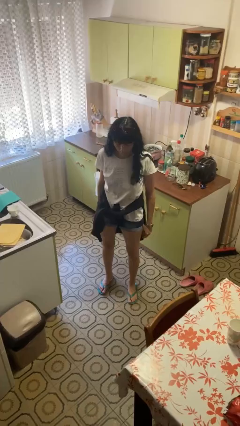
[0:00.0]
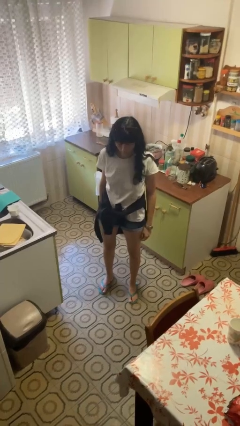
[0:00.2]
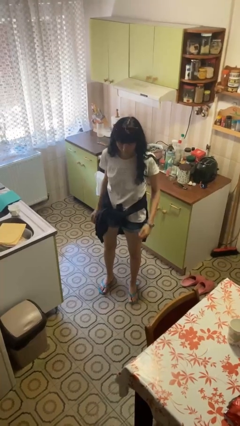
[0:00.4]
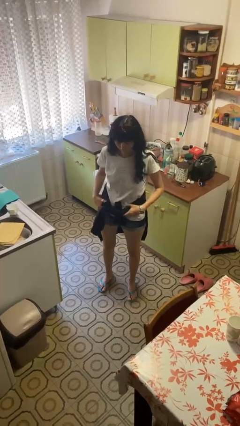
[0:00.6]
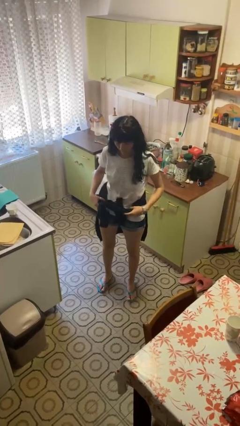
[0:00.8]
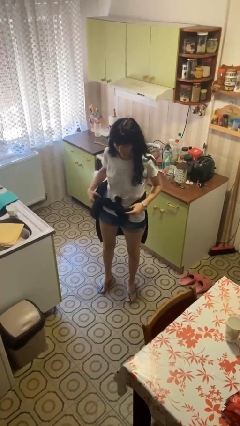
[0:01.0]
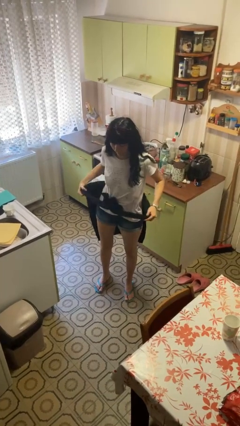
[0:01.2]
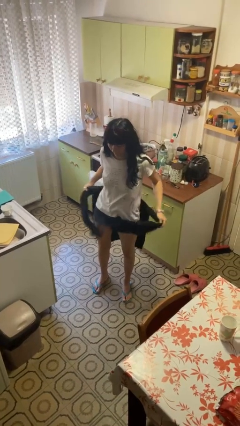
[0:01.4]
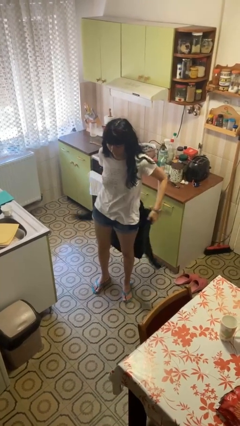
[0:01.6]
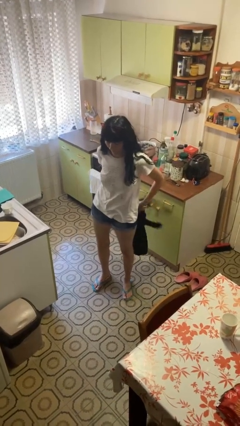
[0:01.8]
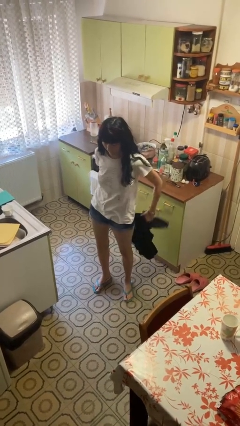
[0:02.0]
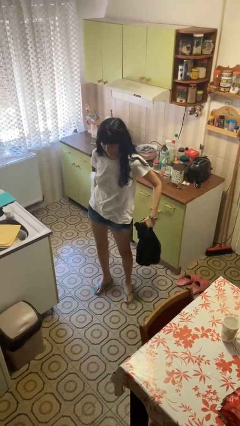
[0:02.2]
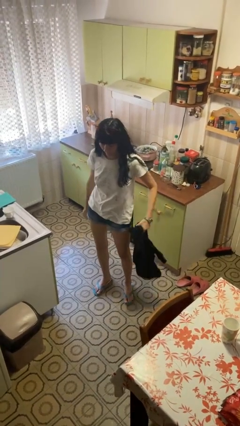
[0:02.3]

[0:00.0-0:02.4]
person unties jacket around waist

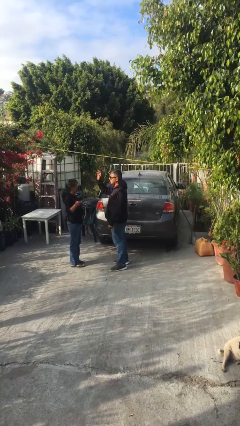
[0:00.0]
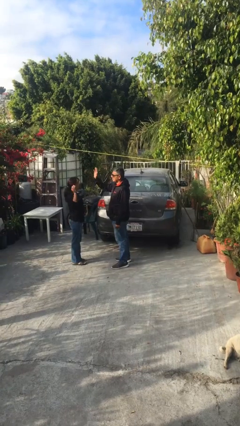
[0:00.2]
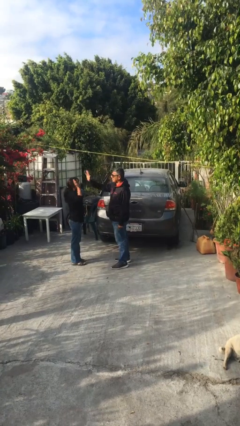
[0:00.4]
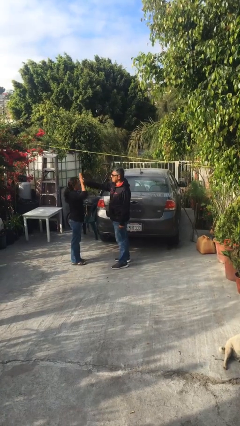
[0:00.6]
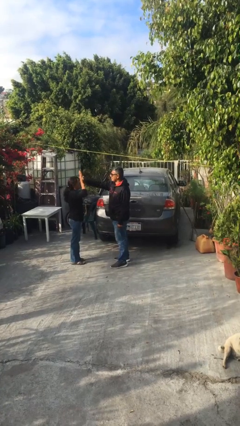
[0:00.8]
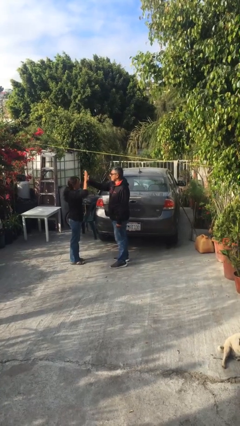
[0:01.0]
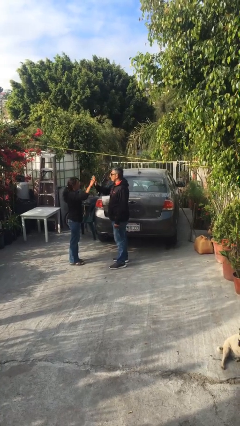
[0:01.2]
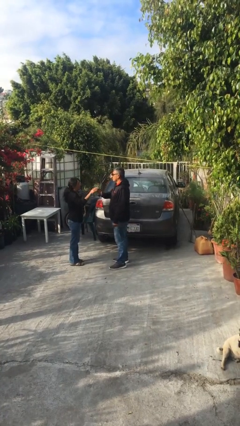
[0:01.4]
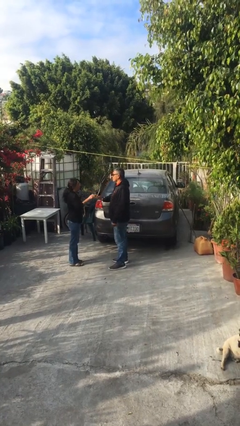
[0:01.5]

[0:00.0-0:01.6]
person highfives hand

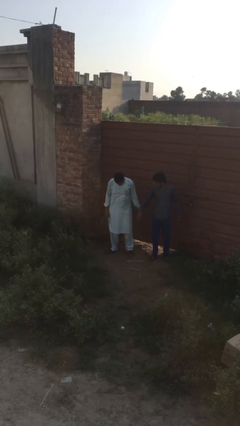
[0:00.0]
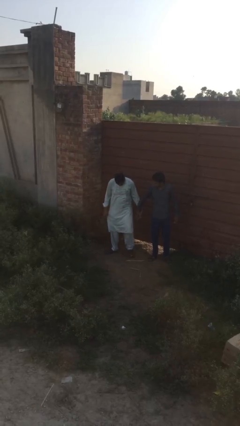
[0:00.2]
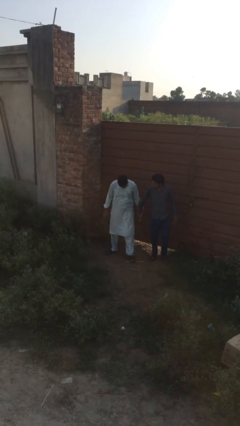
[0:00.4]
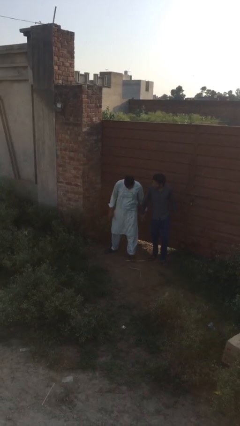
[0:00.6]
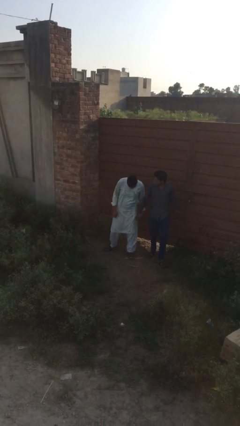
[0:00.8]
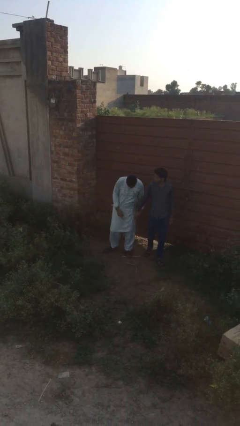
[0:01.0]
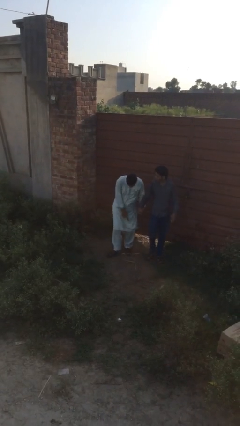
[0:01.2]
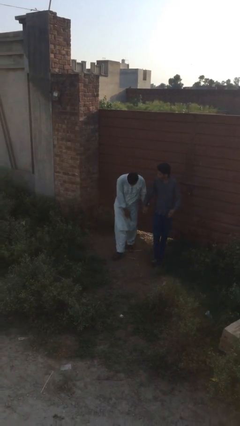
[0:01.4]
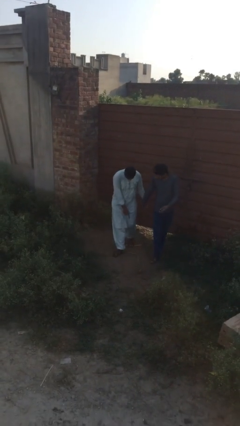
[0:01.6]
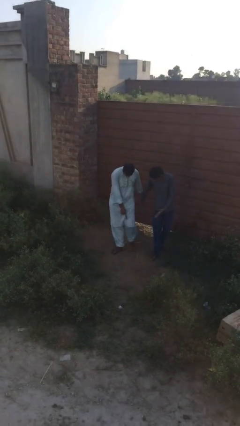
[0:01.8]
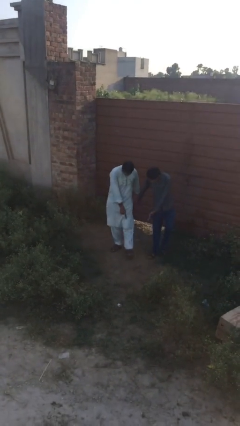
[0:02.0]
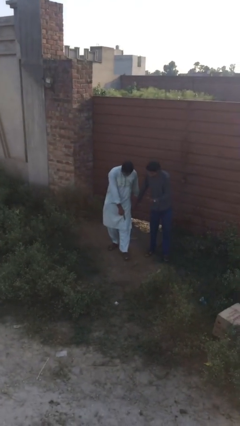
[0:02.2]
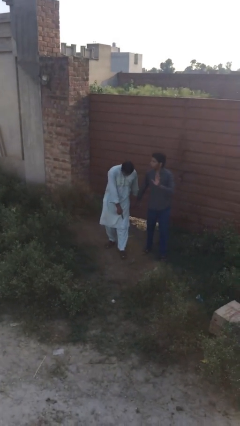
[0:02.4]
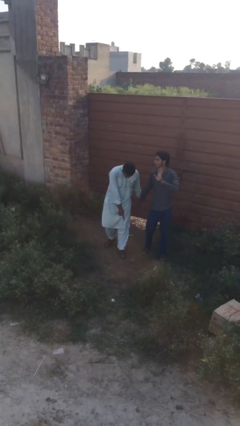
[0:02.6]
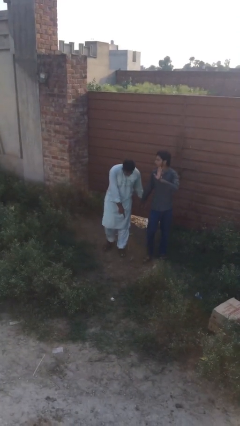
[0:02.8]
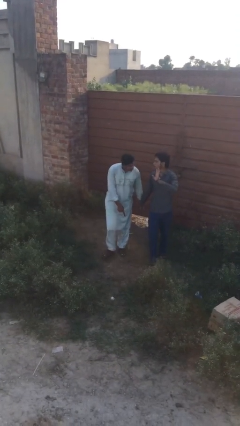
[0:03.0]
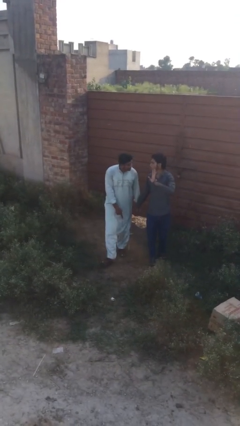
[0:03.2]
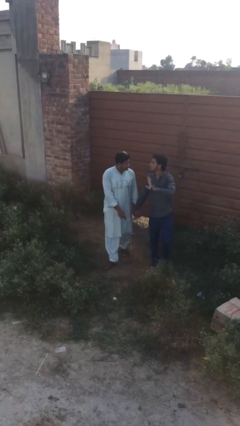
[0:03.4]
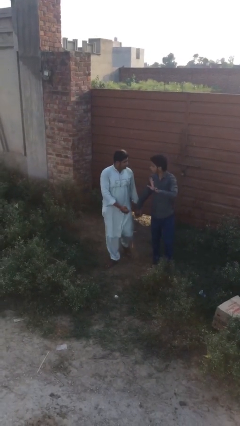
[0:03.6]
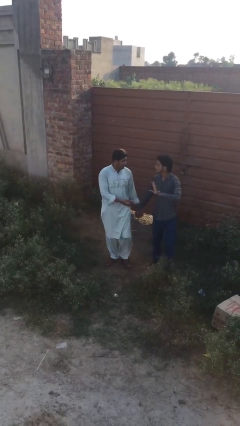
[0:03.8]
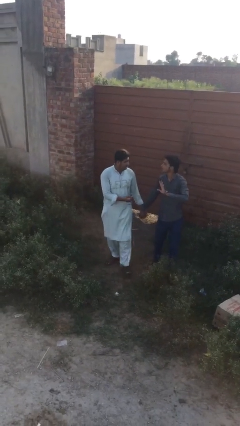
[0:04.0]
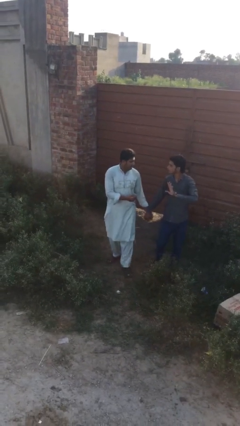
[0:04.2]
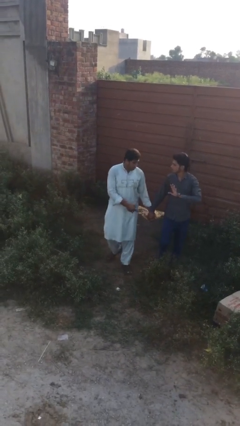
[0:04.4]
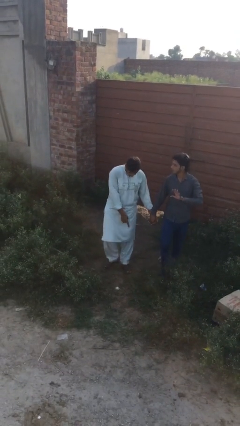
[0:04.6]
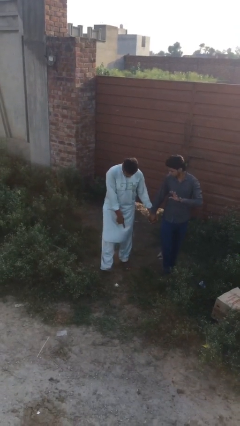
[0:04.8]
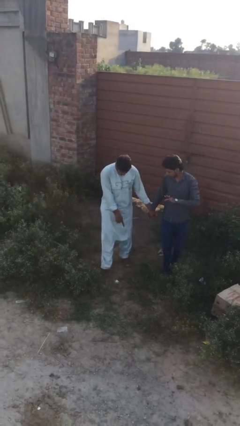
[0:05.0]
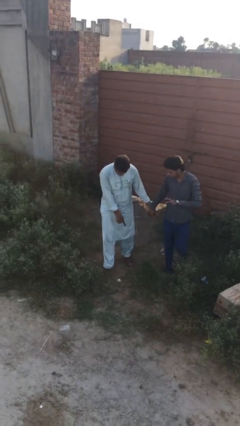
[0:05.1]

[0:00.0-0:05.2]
person holds hand

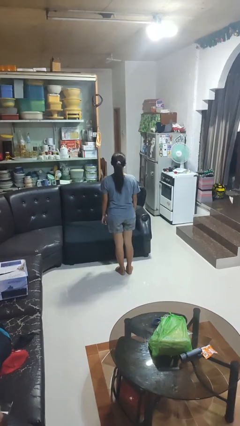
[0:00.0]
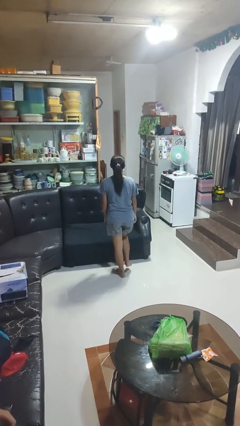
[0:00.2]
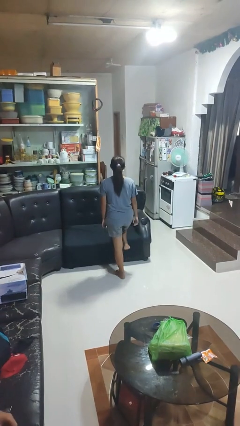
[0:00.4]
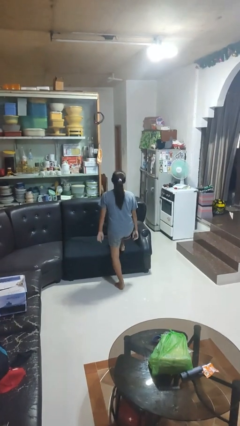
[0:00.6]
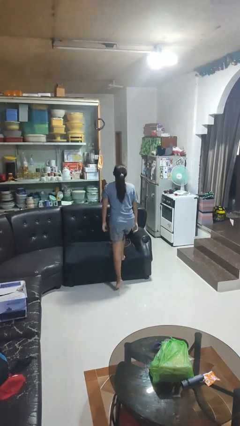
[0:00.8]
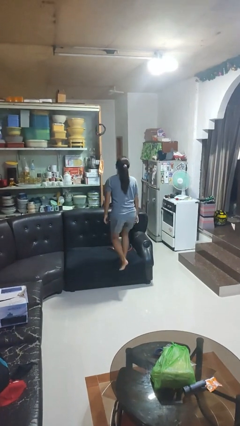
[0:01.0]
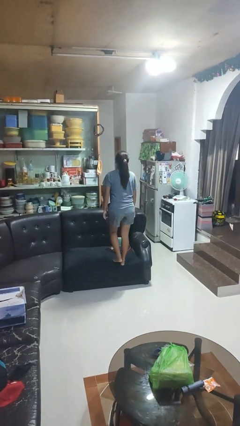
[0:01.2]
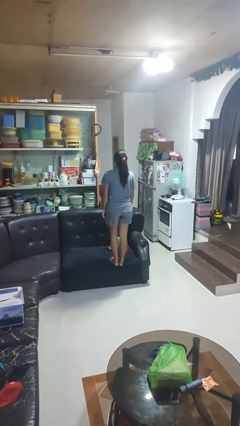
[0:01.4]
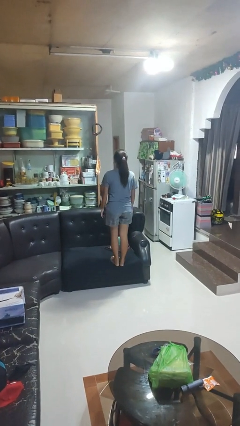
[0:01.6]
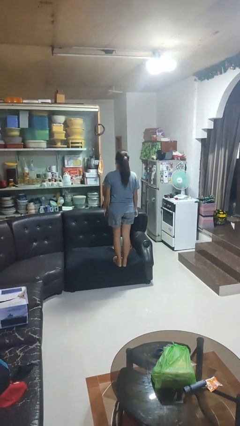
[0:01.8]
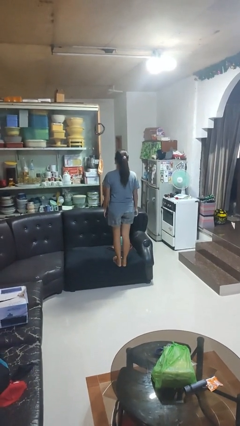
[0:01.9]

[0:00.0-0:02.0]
person climbs on couch

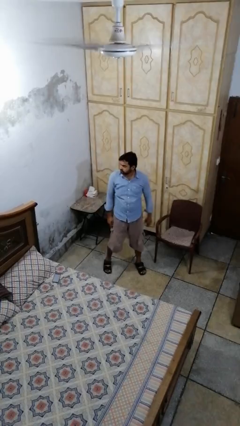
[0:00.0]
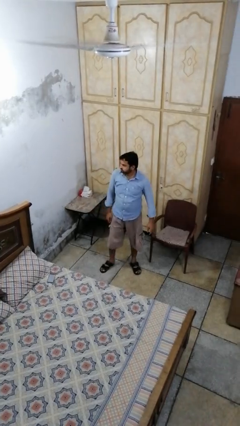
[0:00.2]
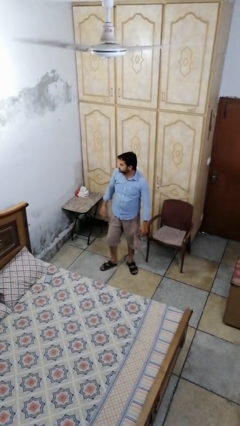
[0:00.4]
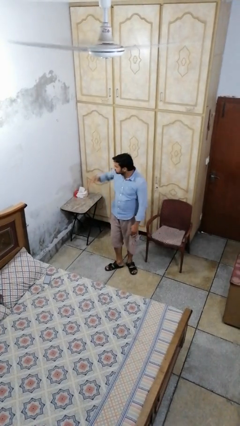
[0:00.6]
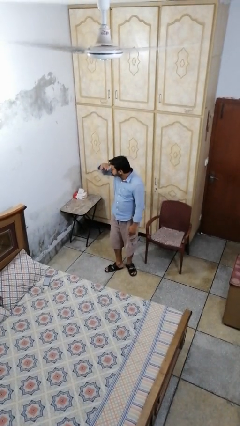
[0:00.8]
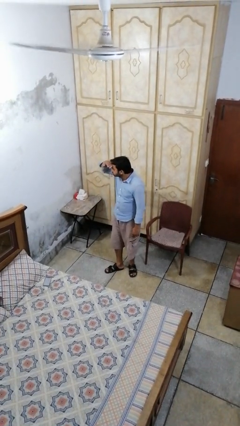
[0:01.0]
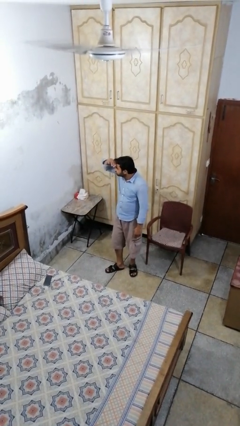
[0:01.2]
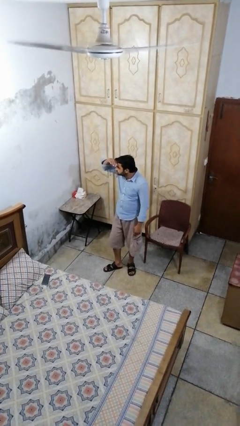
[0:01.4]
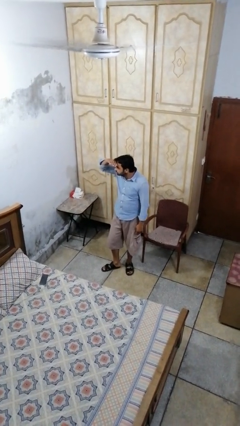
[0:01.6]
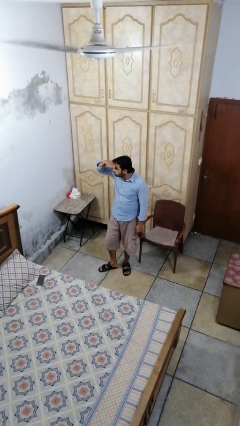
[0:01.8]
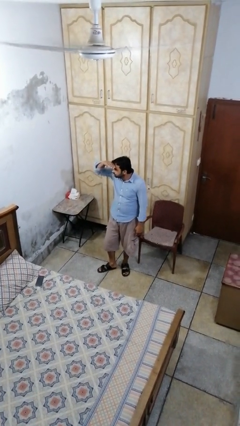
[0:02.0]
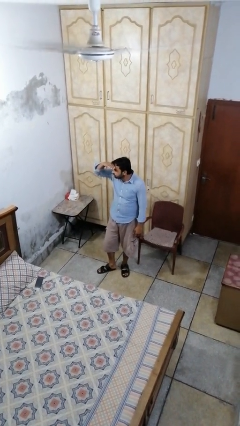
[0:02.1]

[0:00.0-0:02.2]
person shades eyes

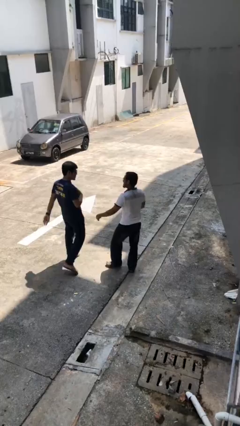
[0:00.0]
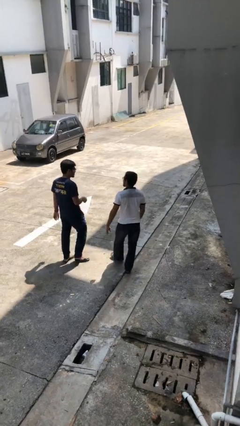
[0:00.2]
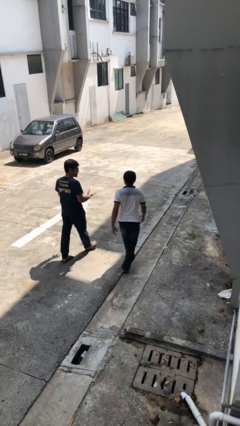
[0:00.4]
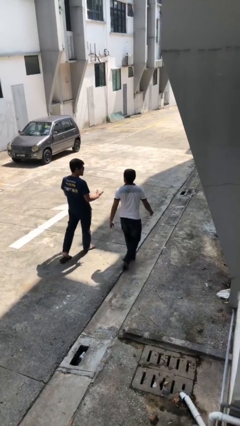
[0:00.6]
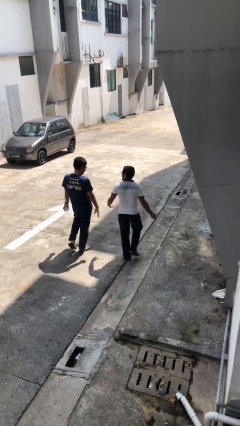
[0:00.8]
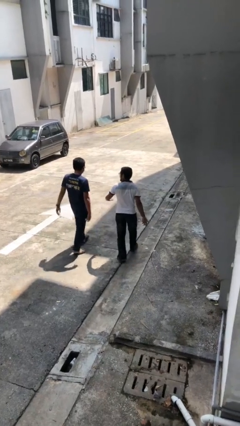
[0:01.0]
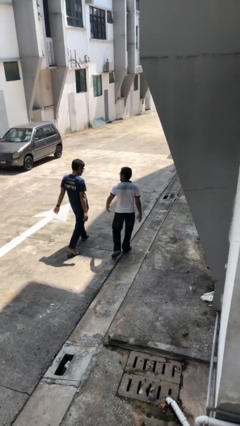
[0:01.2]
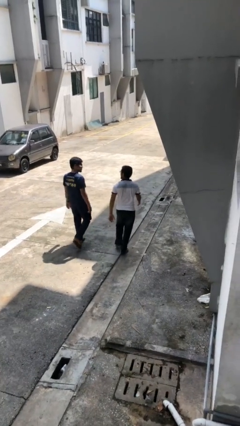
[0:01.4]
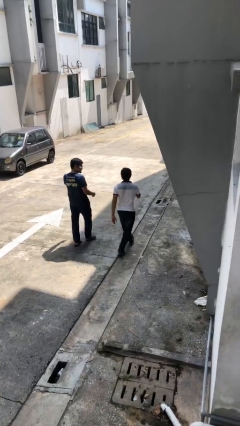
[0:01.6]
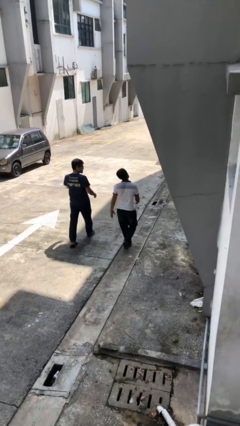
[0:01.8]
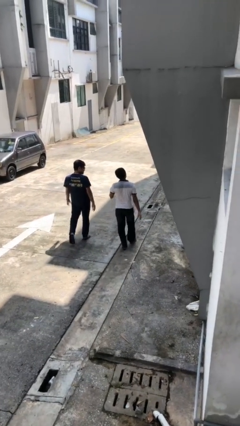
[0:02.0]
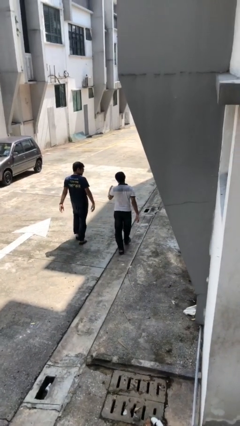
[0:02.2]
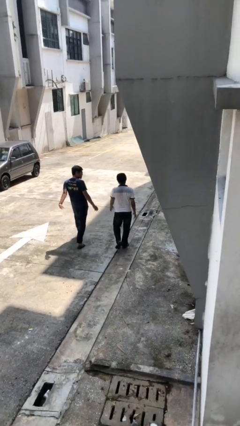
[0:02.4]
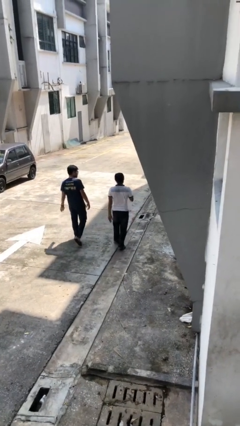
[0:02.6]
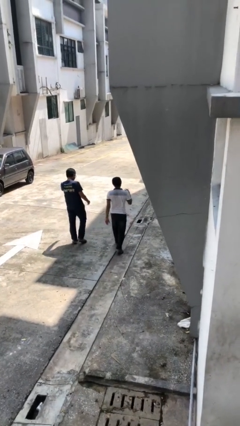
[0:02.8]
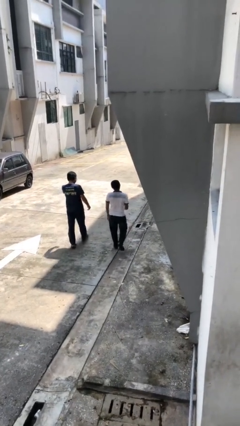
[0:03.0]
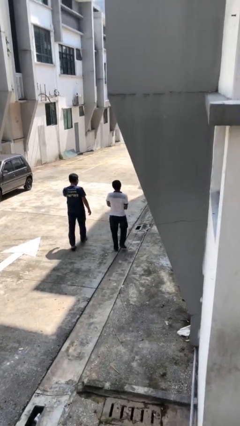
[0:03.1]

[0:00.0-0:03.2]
person talks to person

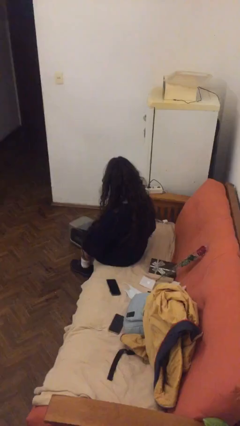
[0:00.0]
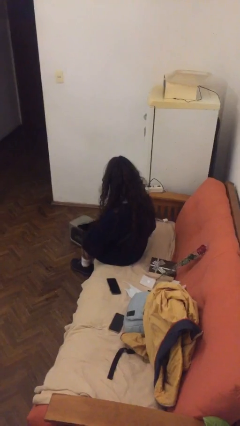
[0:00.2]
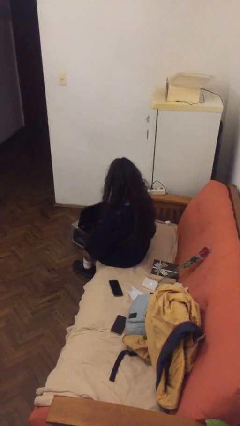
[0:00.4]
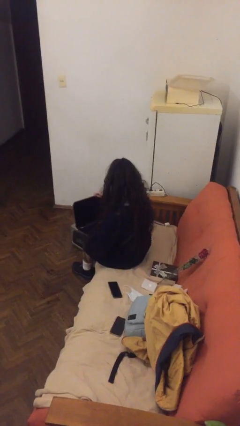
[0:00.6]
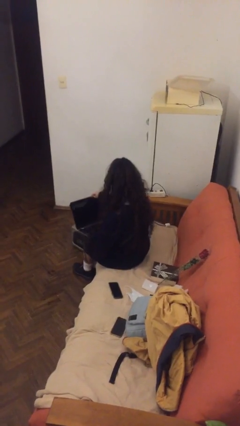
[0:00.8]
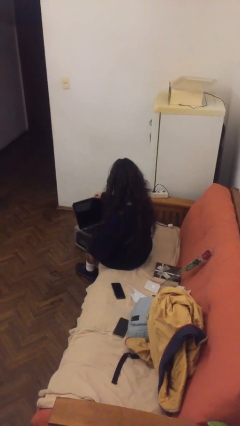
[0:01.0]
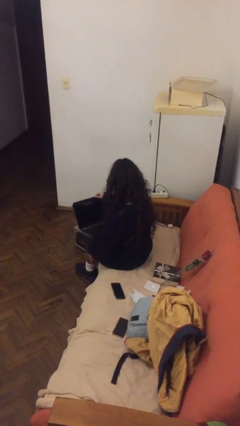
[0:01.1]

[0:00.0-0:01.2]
person opens laptop
